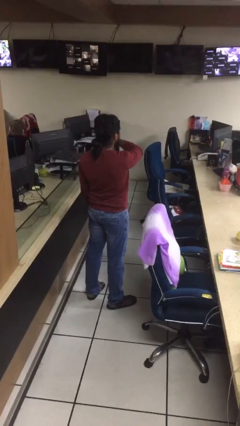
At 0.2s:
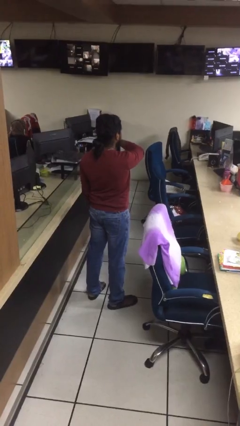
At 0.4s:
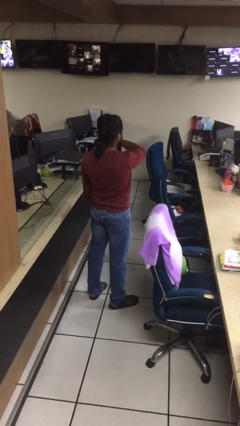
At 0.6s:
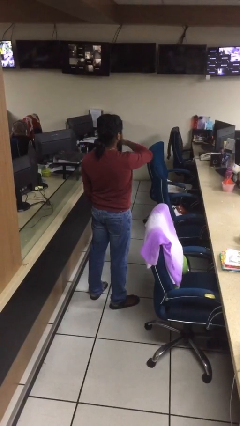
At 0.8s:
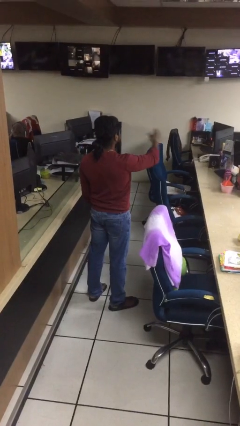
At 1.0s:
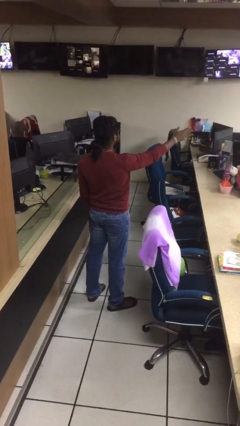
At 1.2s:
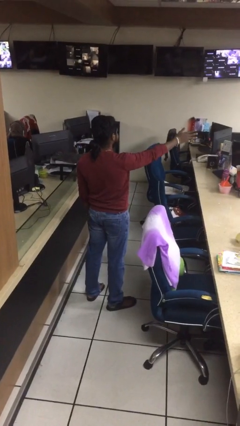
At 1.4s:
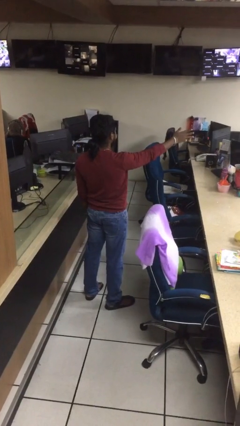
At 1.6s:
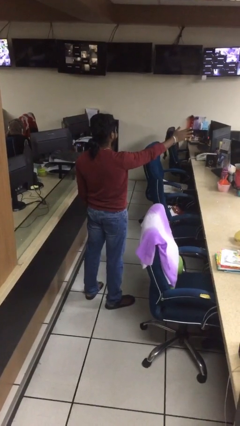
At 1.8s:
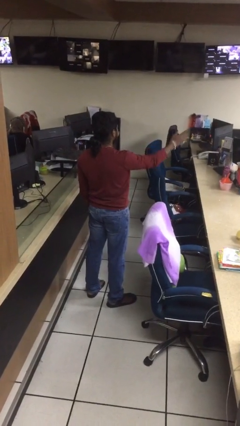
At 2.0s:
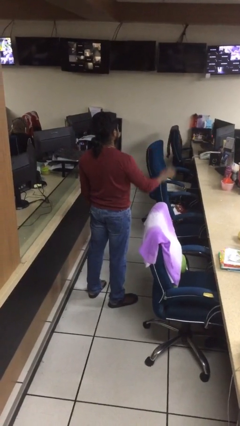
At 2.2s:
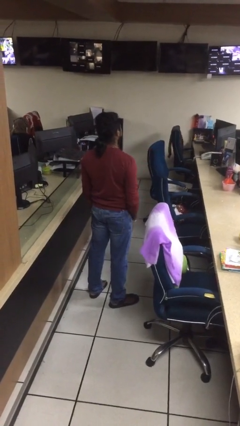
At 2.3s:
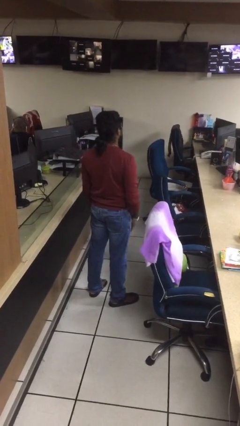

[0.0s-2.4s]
person gestures swipe right

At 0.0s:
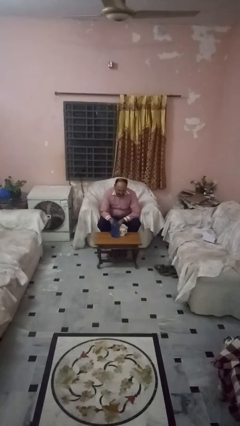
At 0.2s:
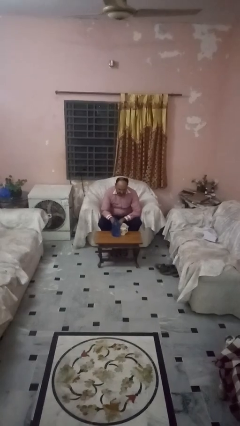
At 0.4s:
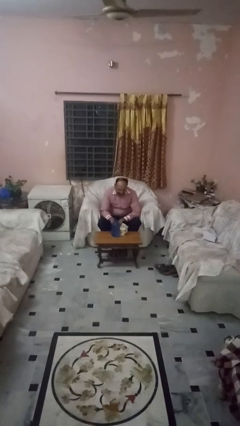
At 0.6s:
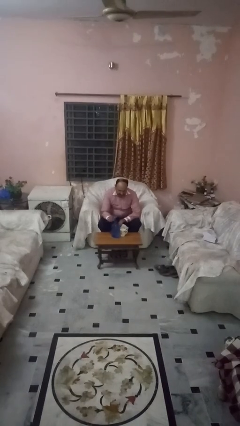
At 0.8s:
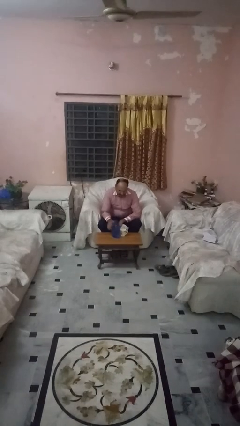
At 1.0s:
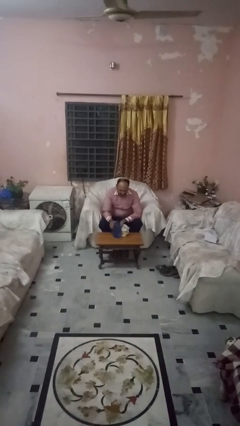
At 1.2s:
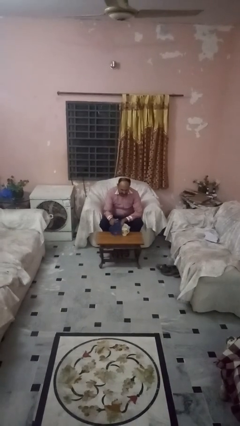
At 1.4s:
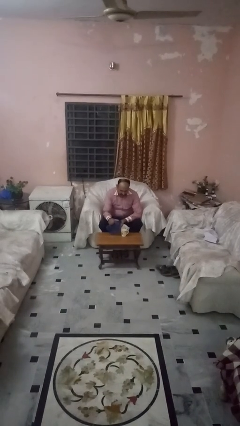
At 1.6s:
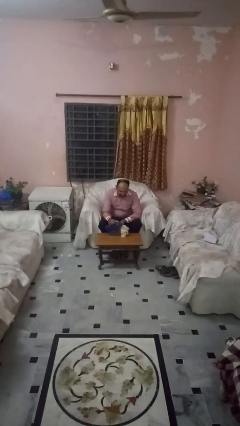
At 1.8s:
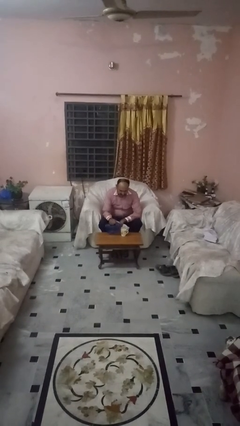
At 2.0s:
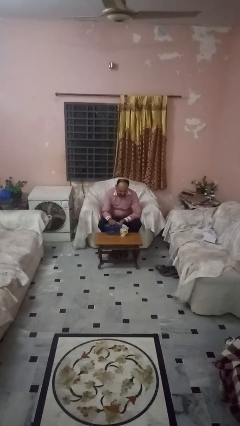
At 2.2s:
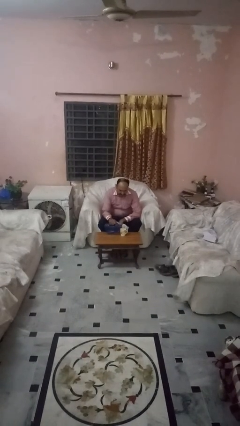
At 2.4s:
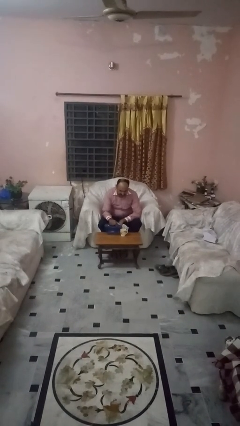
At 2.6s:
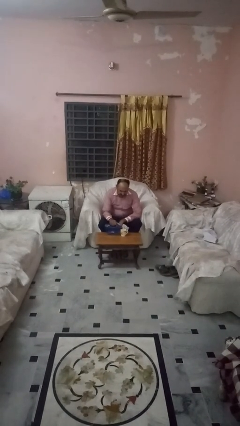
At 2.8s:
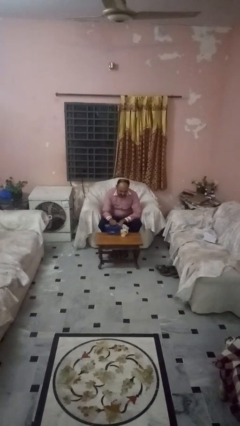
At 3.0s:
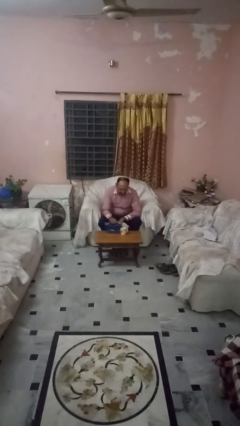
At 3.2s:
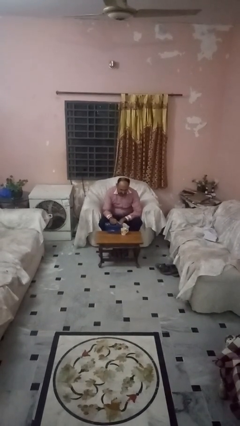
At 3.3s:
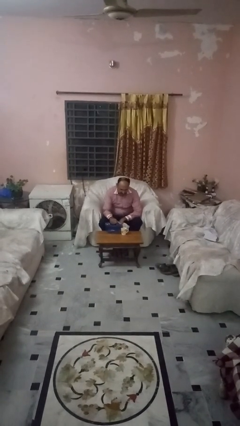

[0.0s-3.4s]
person pours liquid into cup

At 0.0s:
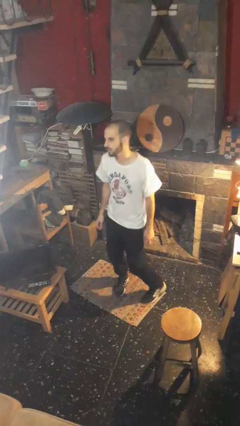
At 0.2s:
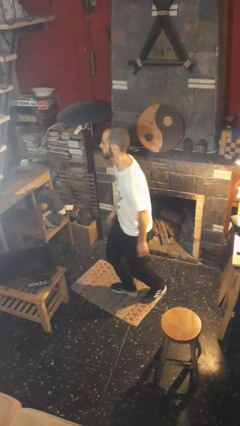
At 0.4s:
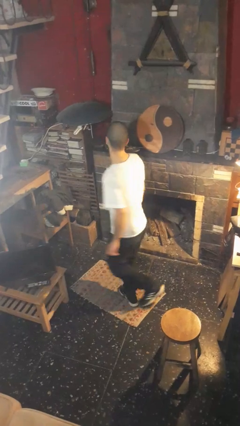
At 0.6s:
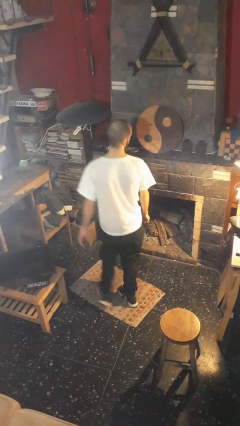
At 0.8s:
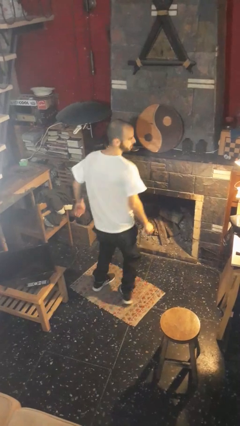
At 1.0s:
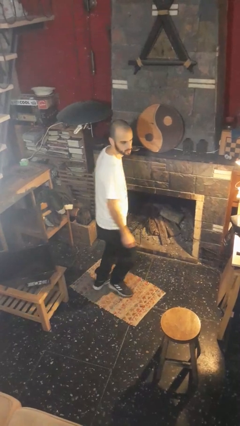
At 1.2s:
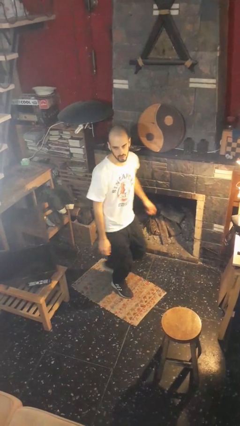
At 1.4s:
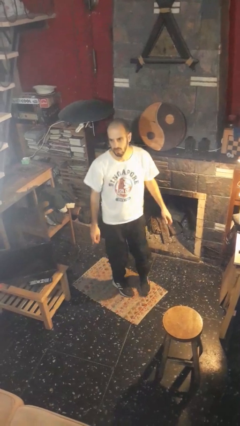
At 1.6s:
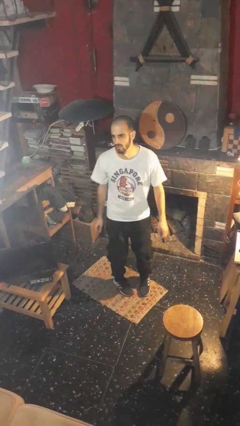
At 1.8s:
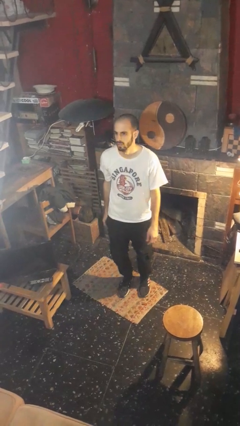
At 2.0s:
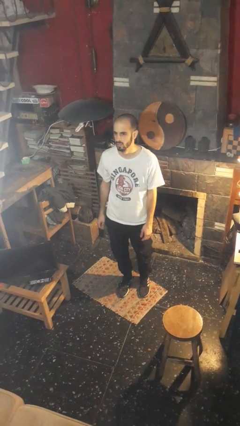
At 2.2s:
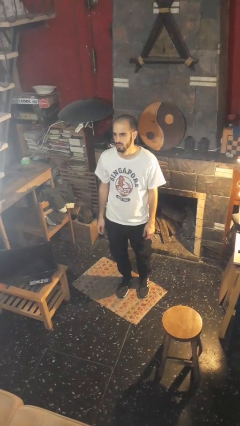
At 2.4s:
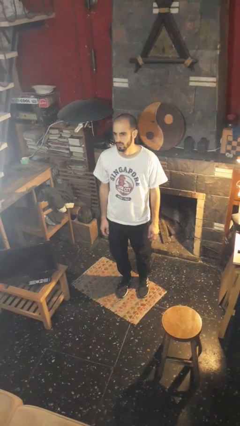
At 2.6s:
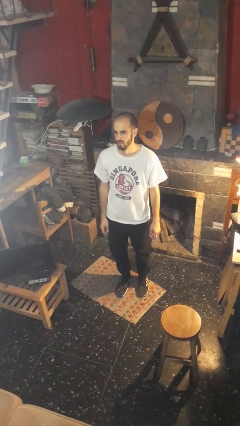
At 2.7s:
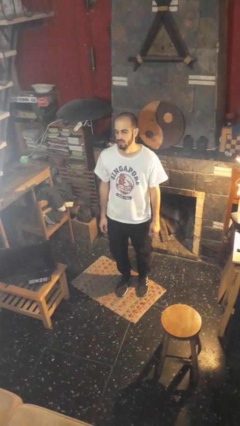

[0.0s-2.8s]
person twirls

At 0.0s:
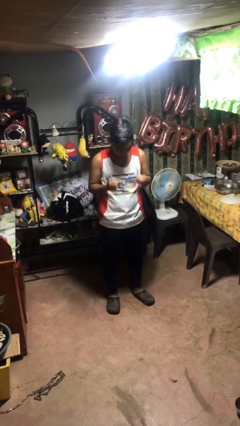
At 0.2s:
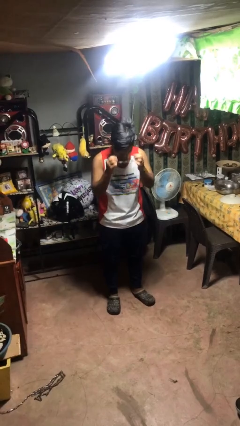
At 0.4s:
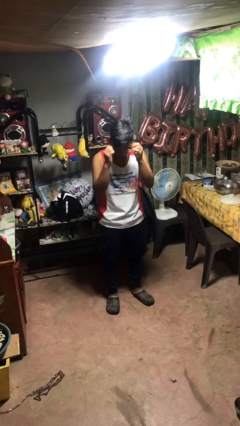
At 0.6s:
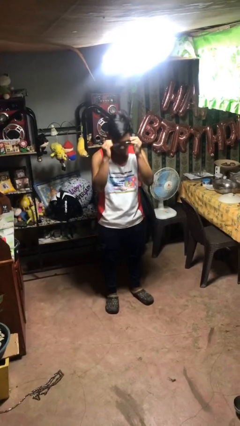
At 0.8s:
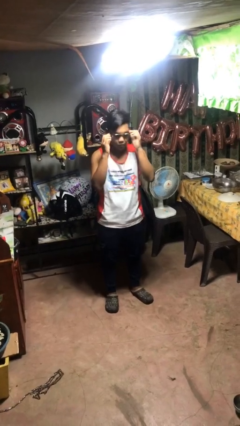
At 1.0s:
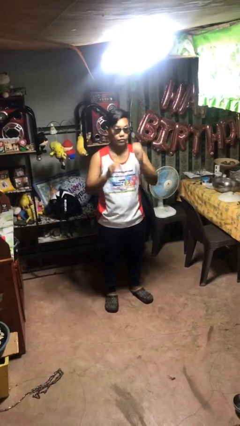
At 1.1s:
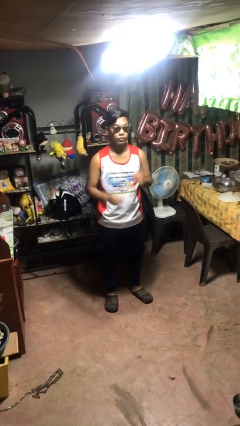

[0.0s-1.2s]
person puts on sunglasses

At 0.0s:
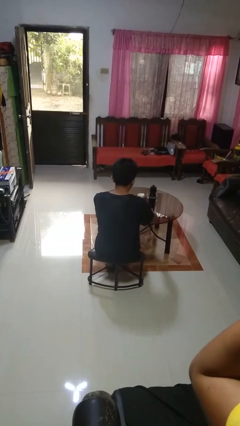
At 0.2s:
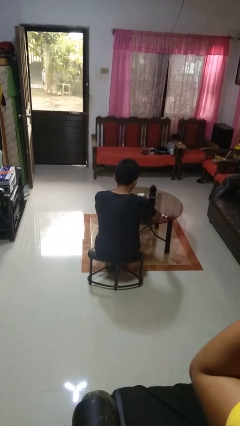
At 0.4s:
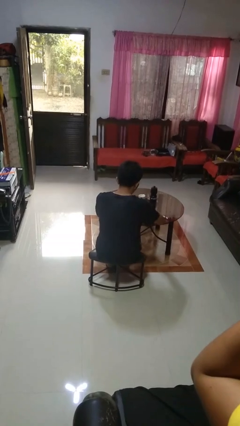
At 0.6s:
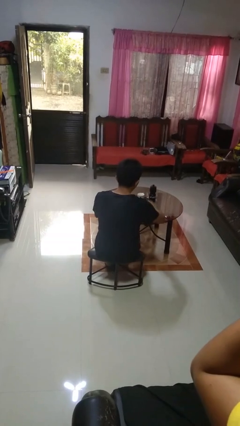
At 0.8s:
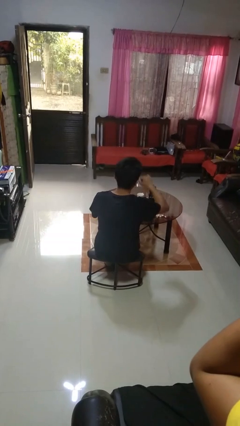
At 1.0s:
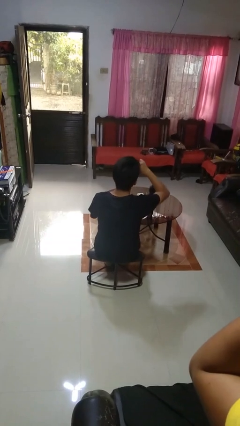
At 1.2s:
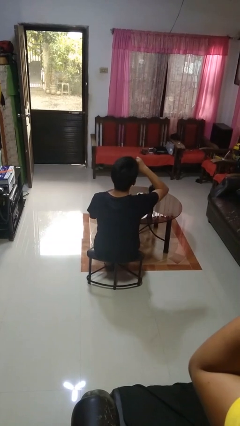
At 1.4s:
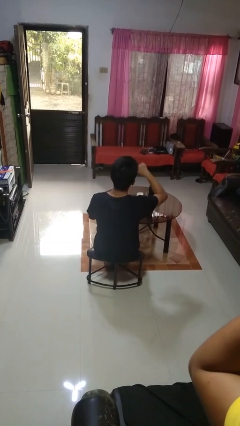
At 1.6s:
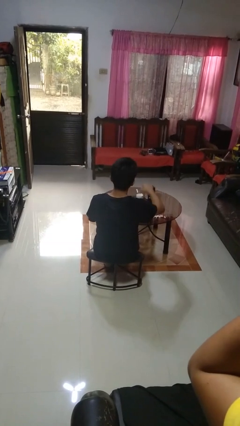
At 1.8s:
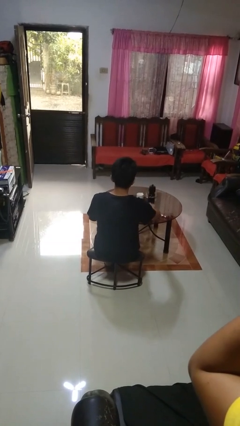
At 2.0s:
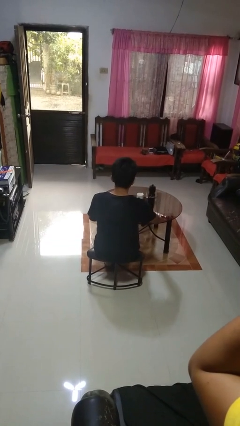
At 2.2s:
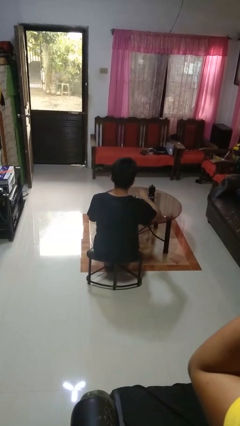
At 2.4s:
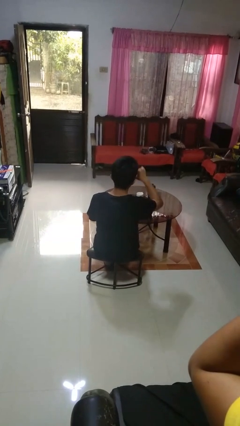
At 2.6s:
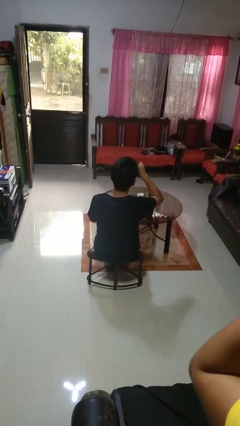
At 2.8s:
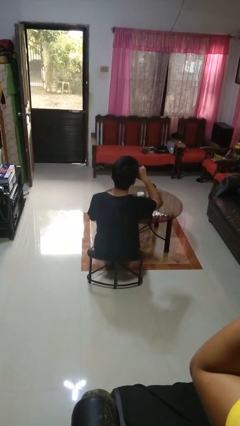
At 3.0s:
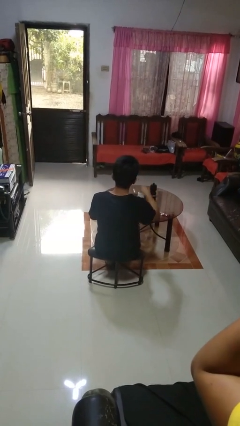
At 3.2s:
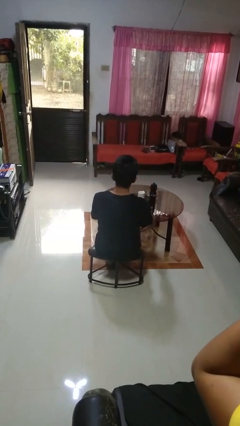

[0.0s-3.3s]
person eats with utensil

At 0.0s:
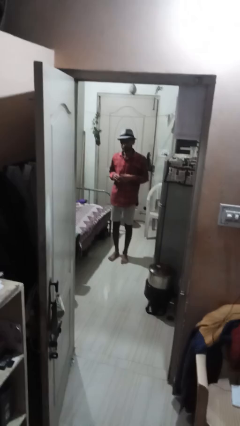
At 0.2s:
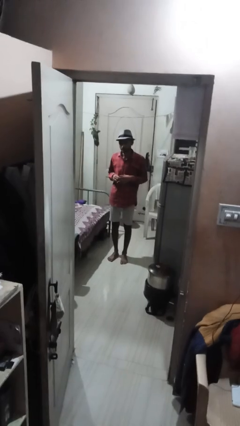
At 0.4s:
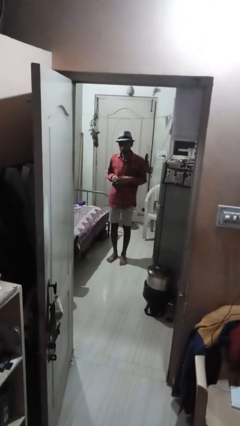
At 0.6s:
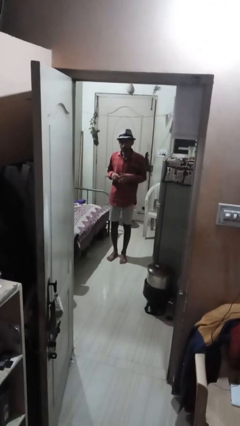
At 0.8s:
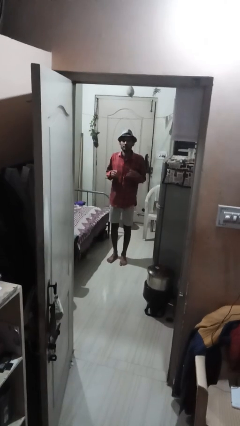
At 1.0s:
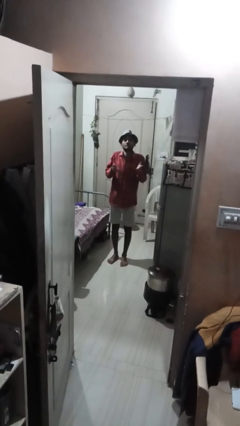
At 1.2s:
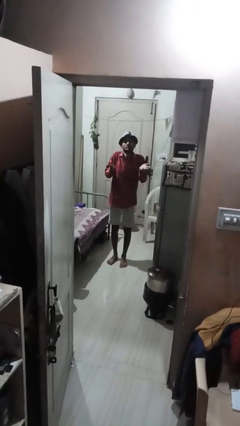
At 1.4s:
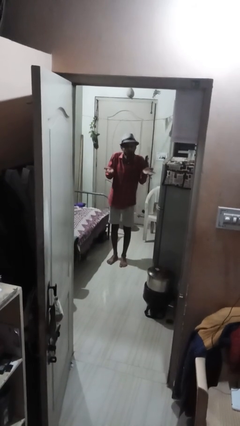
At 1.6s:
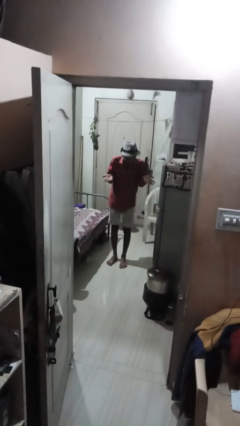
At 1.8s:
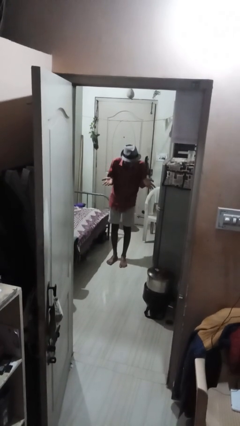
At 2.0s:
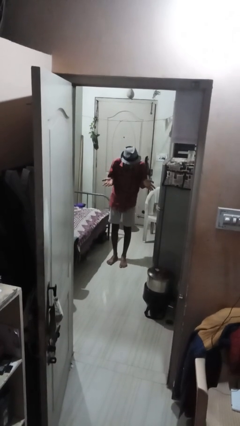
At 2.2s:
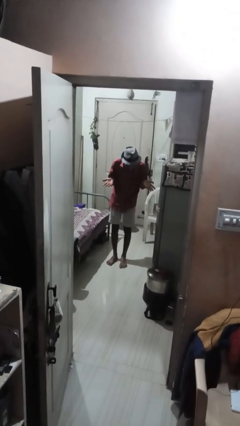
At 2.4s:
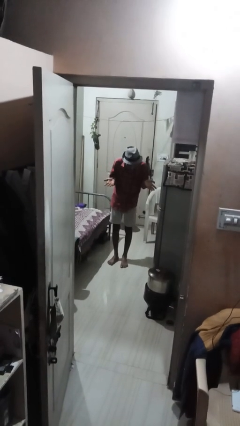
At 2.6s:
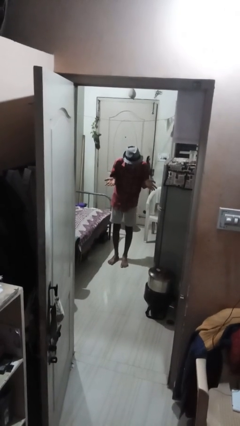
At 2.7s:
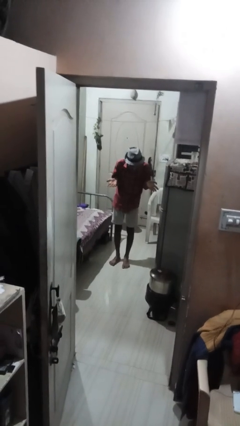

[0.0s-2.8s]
person shrugs

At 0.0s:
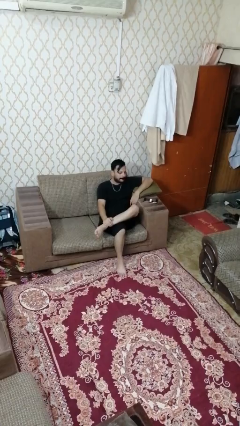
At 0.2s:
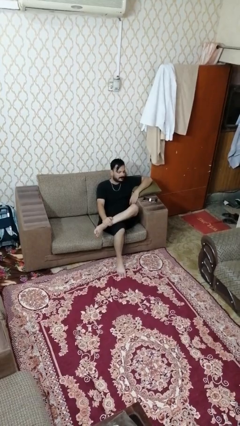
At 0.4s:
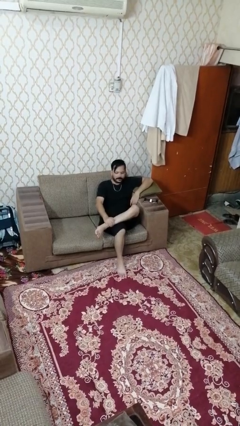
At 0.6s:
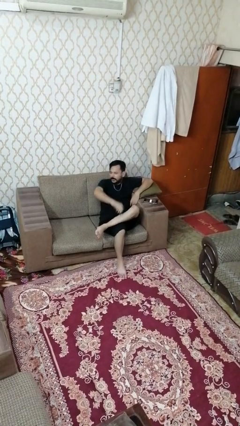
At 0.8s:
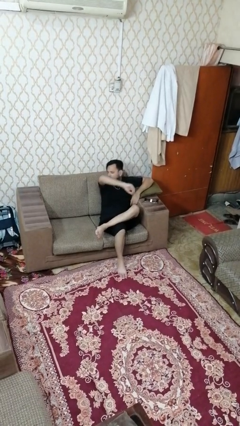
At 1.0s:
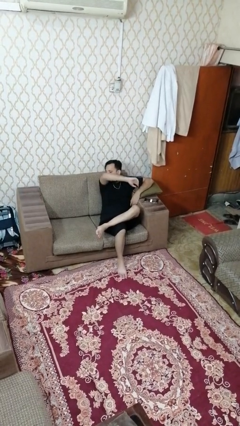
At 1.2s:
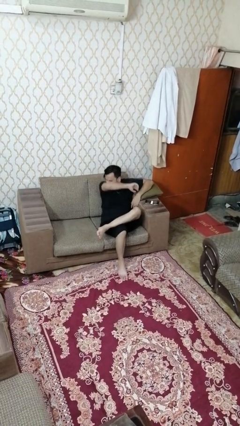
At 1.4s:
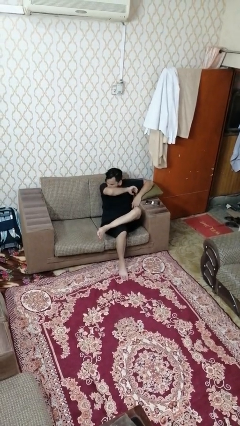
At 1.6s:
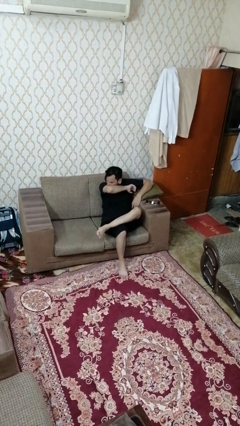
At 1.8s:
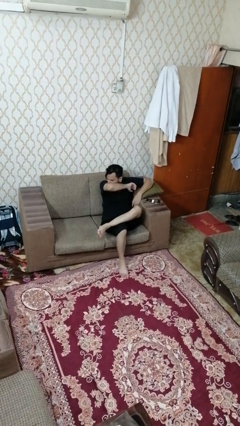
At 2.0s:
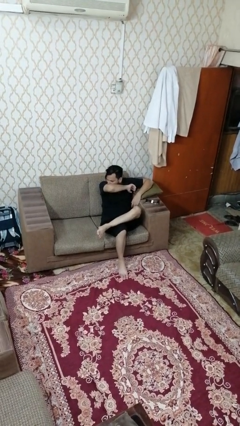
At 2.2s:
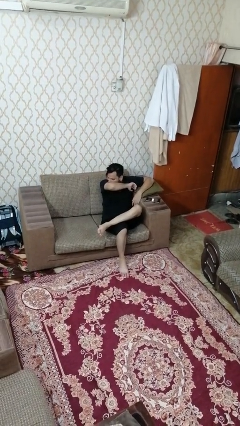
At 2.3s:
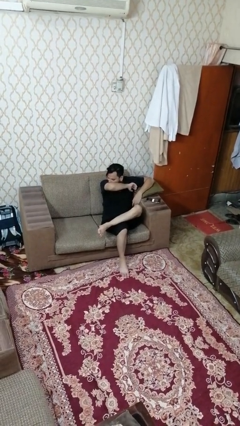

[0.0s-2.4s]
person sneezes into arm
